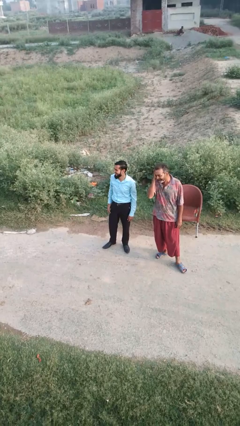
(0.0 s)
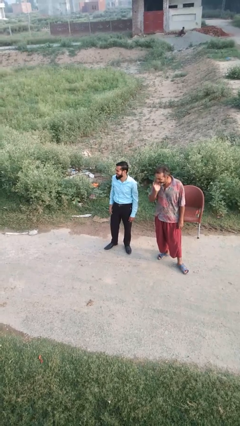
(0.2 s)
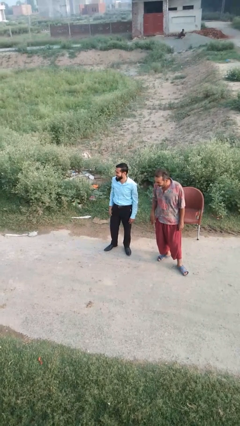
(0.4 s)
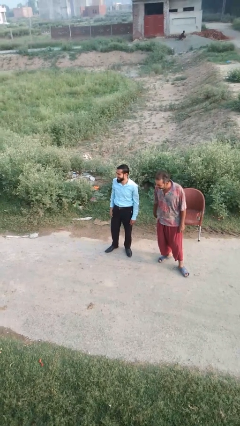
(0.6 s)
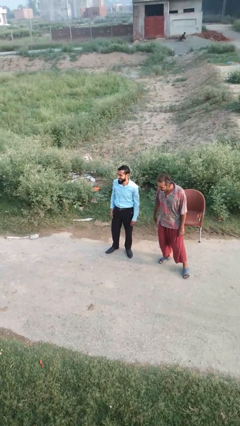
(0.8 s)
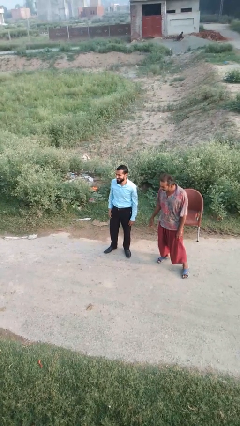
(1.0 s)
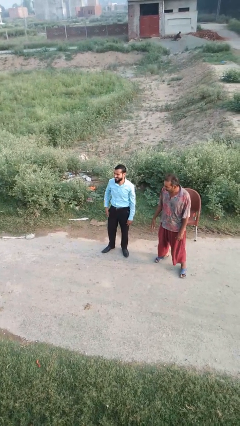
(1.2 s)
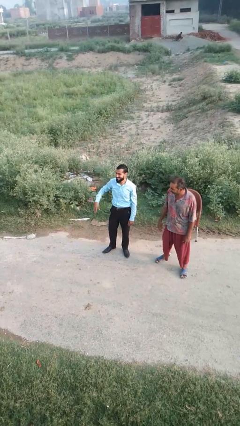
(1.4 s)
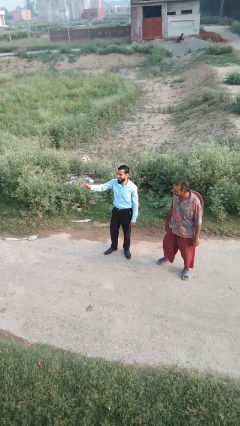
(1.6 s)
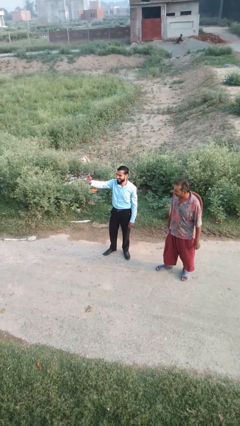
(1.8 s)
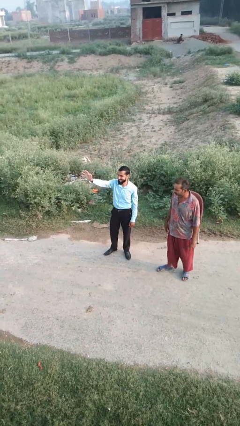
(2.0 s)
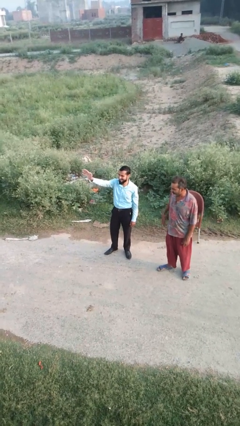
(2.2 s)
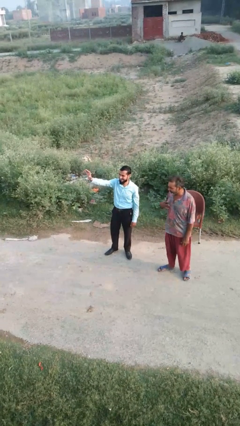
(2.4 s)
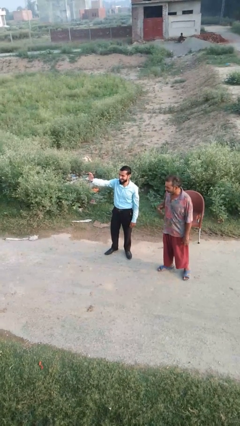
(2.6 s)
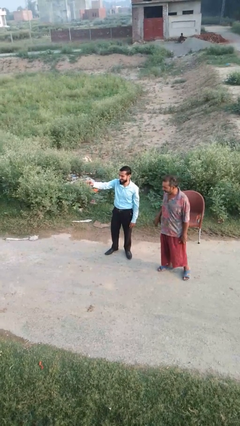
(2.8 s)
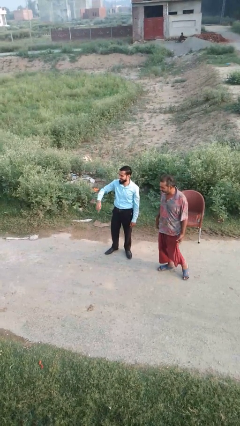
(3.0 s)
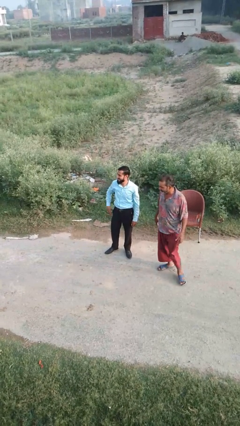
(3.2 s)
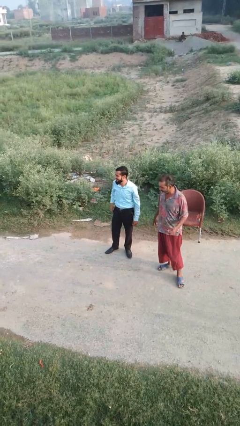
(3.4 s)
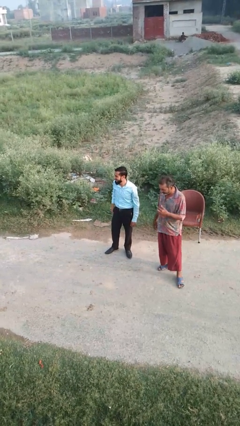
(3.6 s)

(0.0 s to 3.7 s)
person waves at person

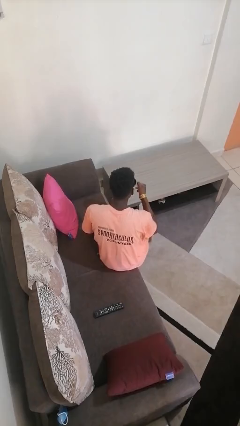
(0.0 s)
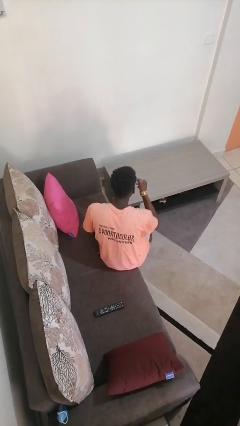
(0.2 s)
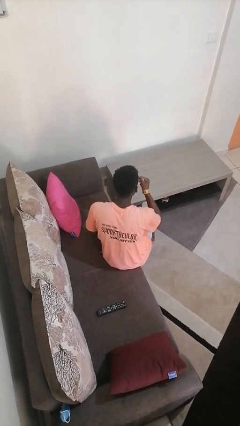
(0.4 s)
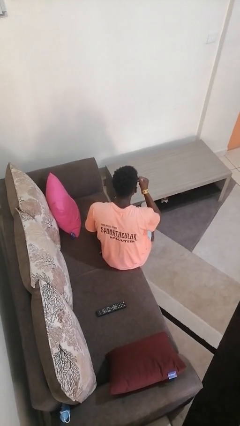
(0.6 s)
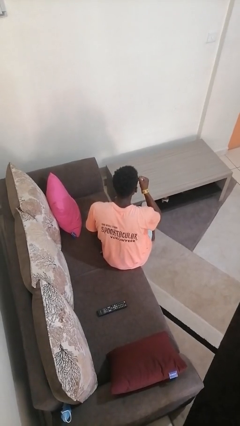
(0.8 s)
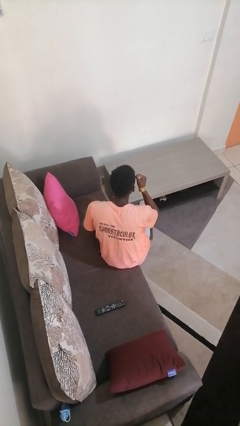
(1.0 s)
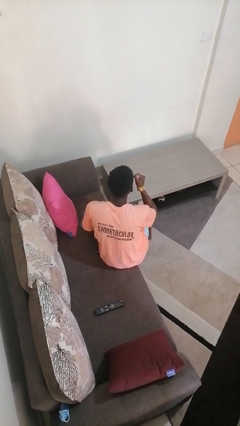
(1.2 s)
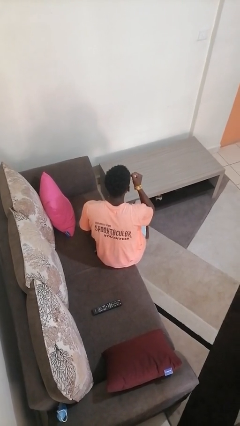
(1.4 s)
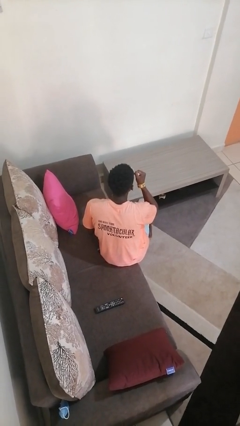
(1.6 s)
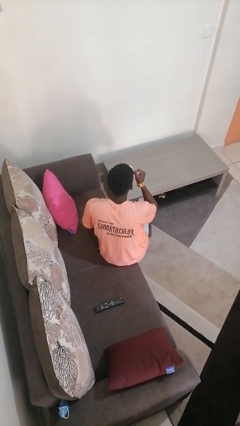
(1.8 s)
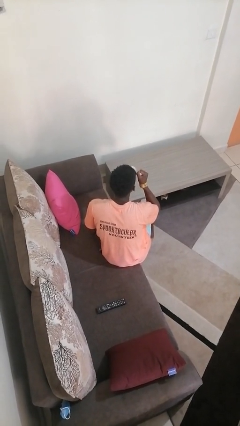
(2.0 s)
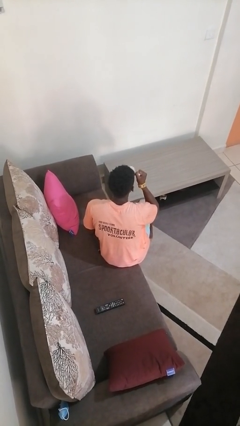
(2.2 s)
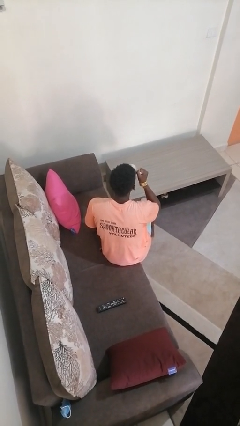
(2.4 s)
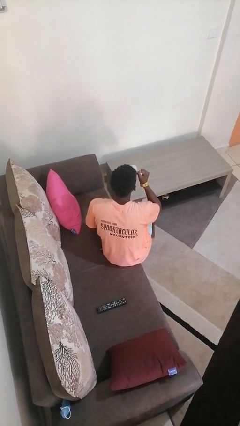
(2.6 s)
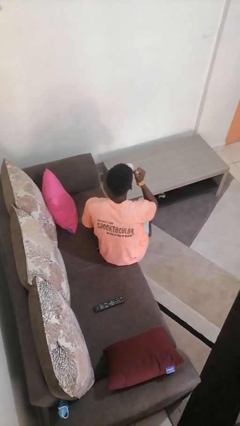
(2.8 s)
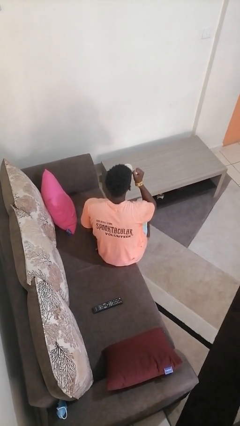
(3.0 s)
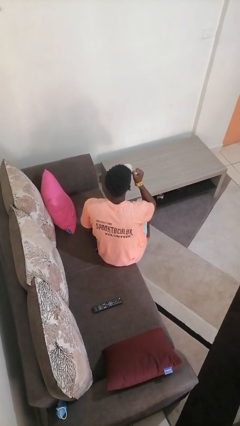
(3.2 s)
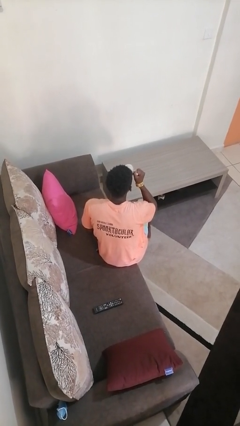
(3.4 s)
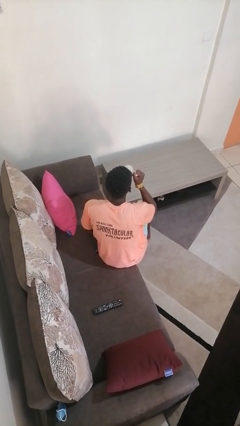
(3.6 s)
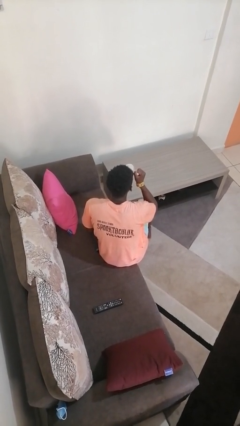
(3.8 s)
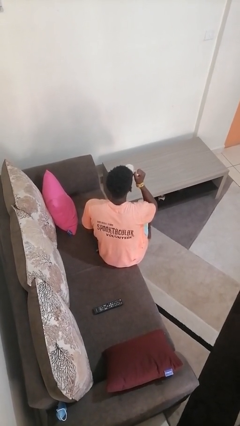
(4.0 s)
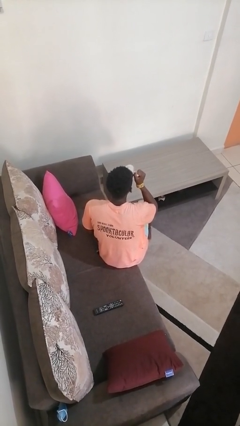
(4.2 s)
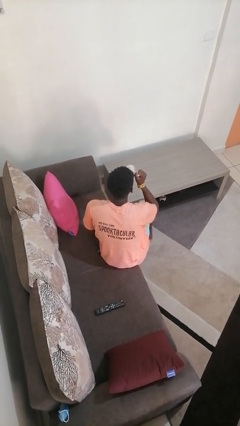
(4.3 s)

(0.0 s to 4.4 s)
person drinks from mug

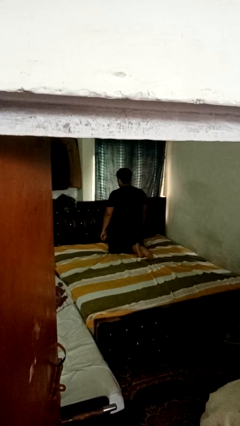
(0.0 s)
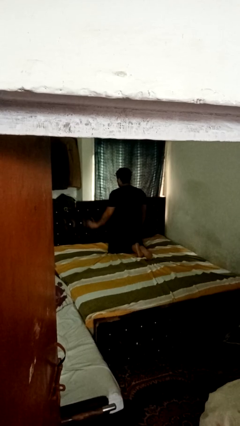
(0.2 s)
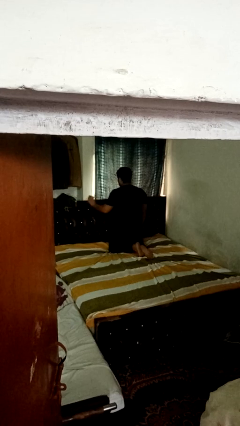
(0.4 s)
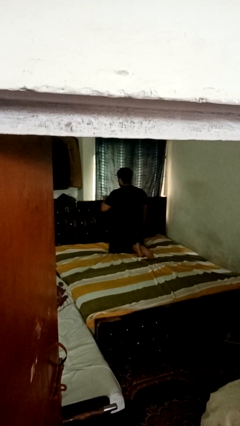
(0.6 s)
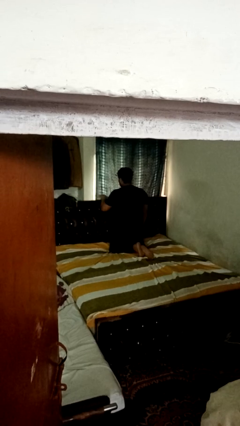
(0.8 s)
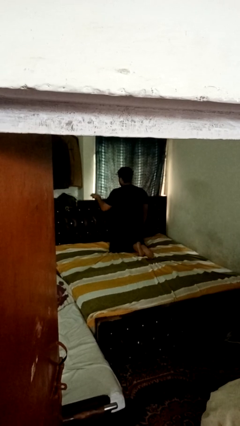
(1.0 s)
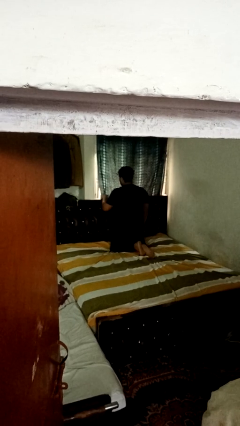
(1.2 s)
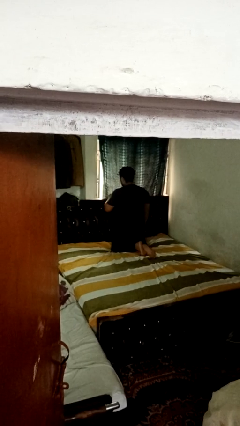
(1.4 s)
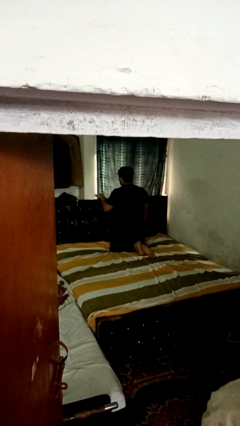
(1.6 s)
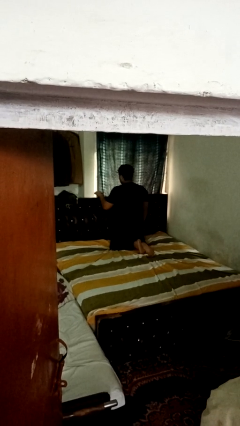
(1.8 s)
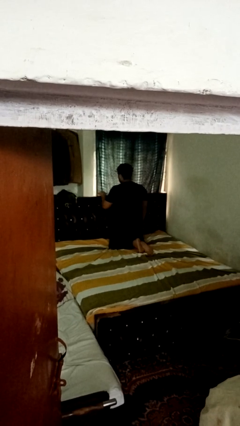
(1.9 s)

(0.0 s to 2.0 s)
person dusts furniture

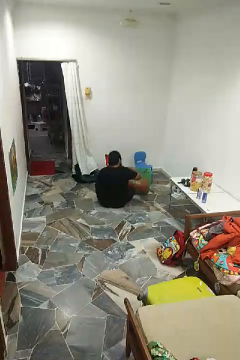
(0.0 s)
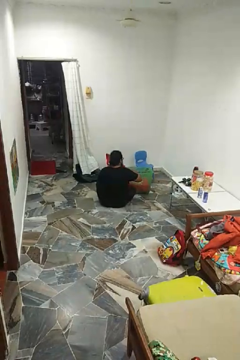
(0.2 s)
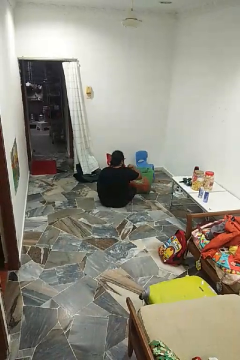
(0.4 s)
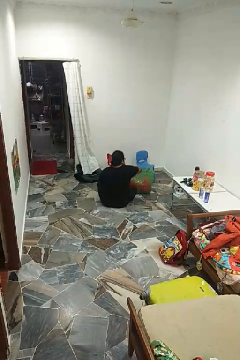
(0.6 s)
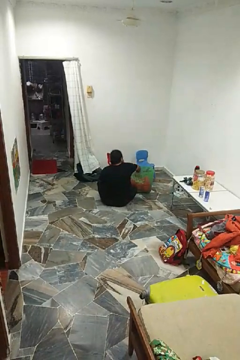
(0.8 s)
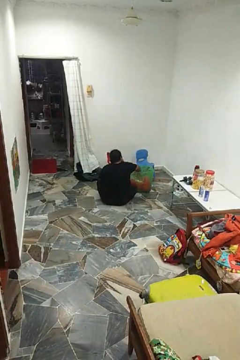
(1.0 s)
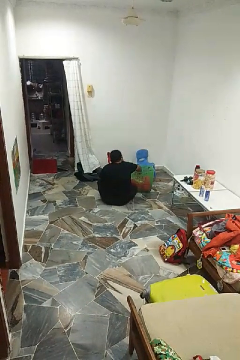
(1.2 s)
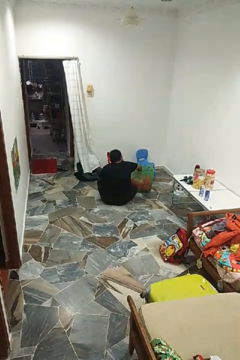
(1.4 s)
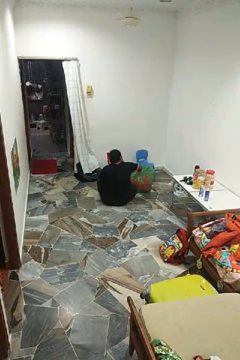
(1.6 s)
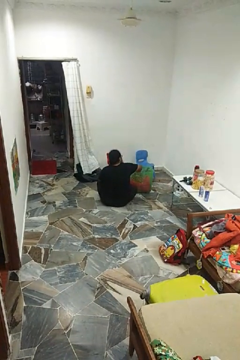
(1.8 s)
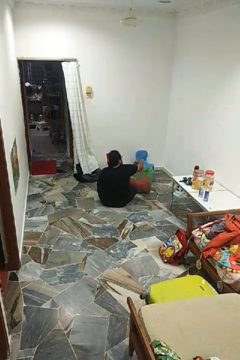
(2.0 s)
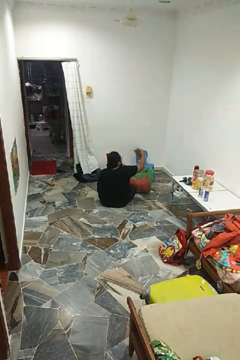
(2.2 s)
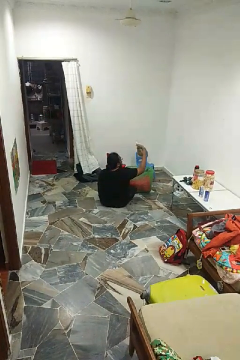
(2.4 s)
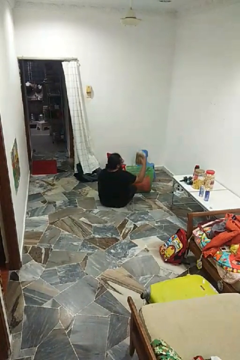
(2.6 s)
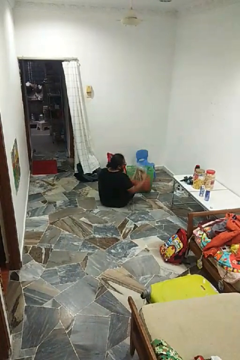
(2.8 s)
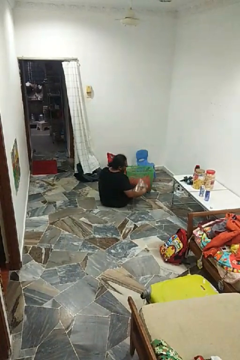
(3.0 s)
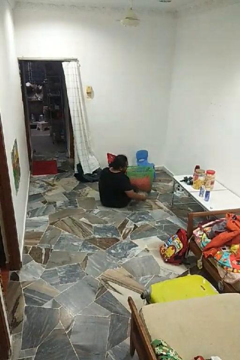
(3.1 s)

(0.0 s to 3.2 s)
person takes object from basket

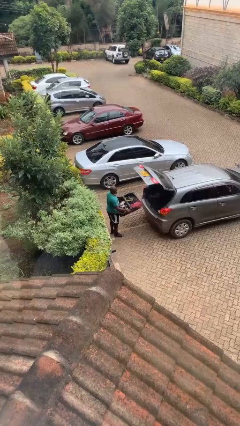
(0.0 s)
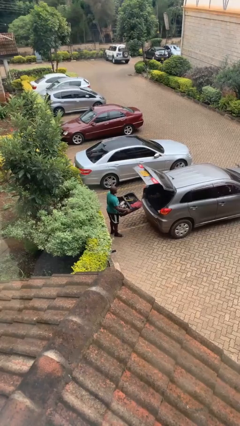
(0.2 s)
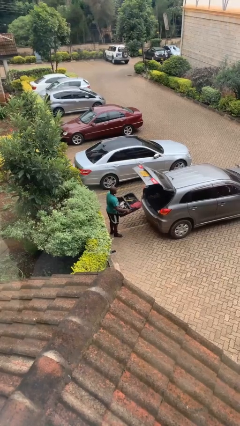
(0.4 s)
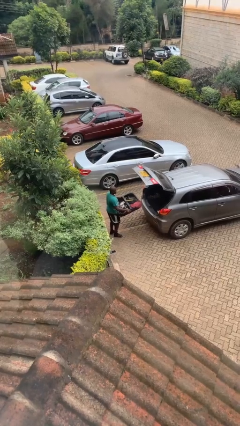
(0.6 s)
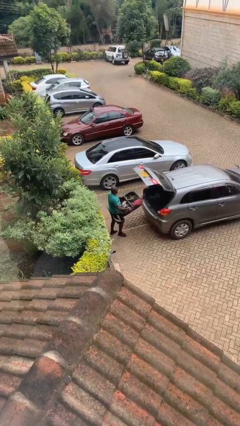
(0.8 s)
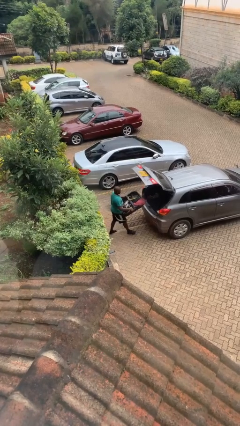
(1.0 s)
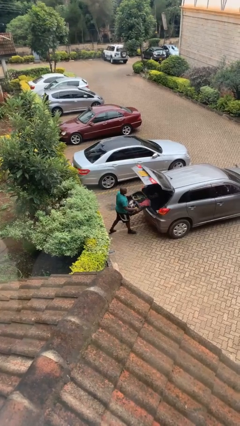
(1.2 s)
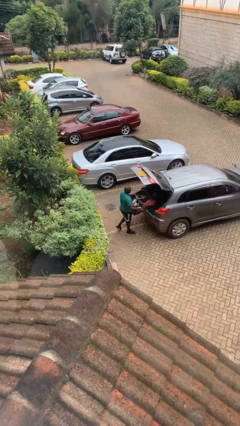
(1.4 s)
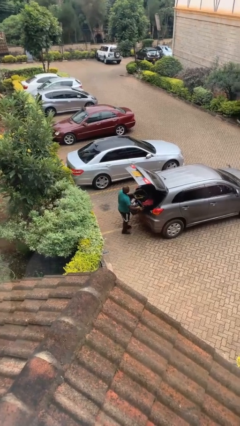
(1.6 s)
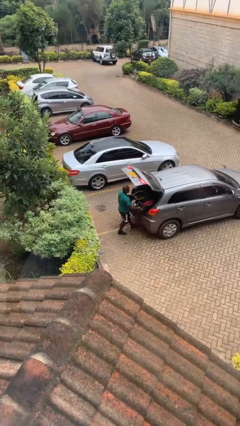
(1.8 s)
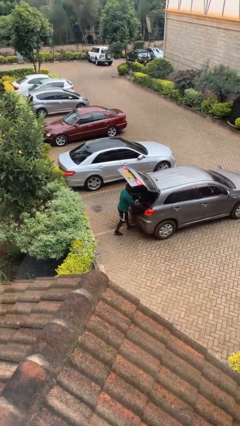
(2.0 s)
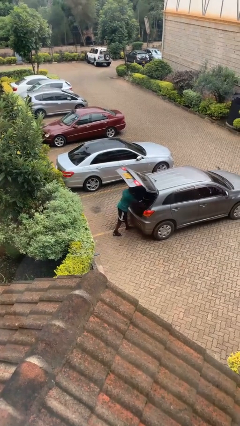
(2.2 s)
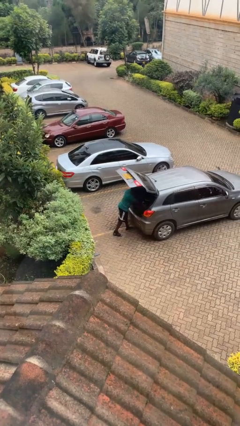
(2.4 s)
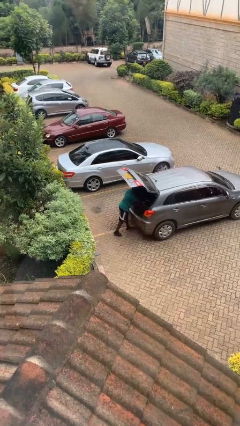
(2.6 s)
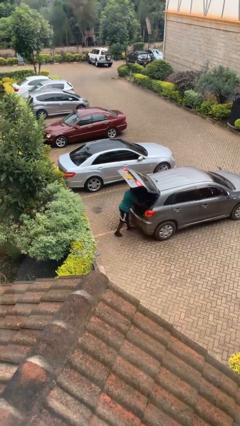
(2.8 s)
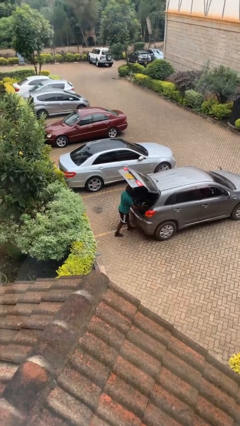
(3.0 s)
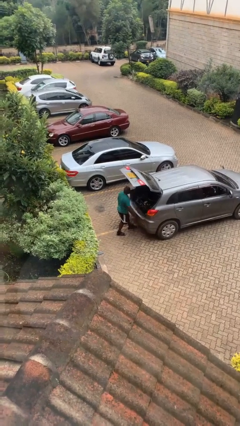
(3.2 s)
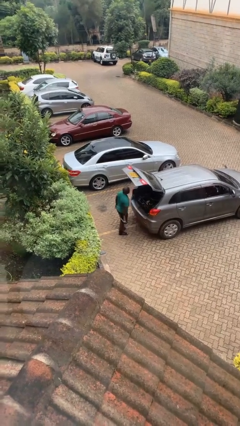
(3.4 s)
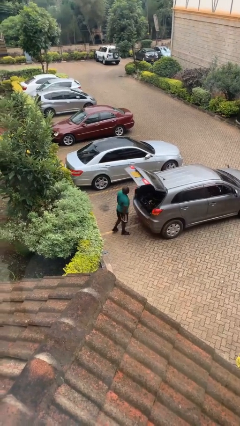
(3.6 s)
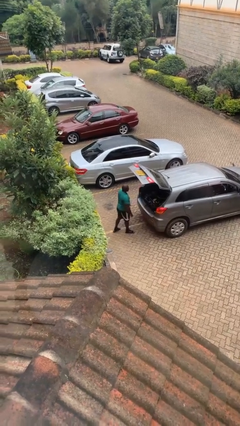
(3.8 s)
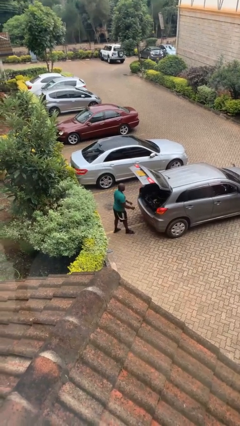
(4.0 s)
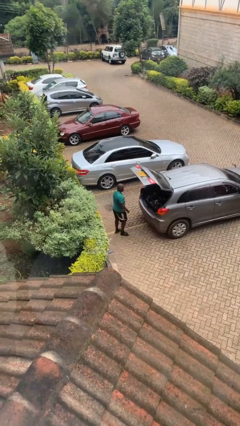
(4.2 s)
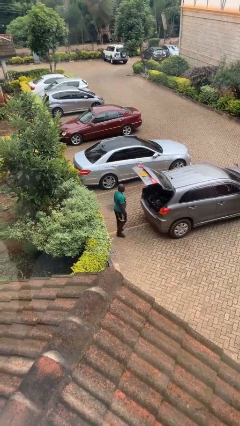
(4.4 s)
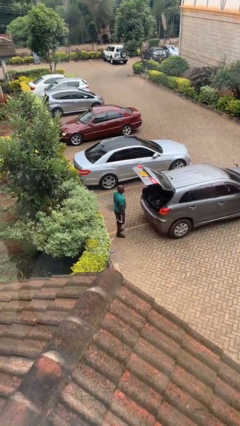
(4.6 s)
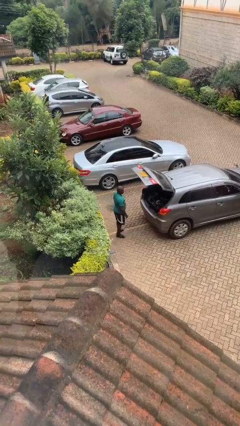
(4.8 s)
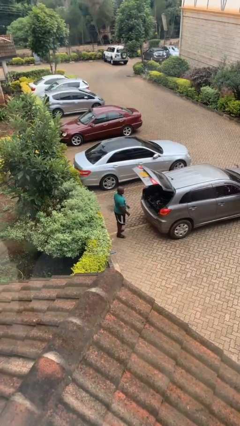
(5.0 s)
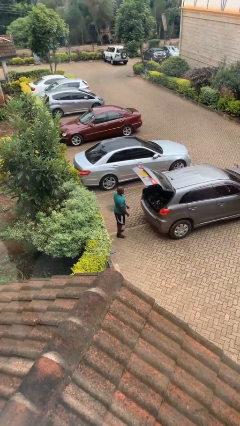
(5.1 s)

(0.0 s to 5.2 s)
person loads car
